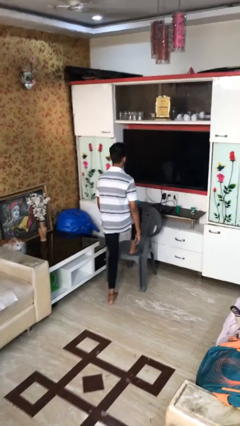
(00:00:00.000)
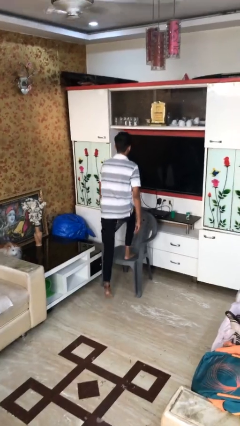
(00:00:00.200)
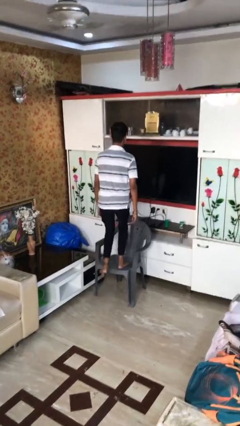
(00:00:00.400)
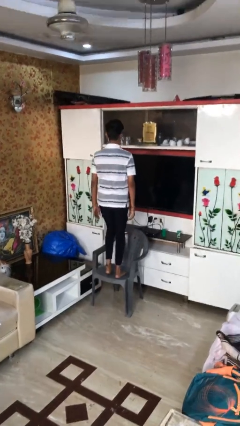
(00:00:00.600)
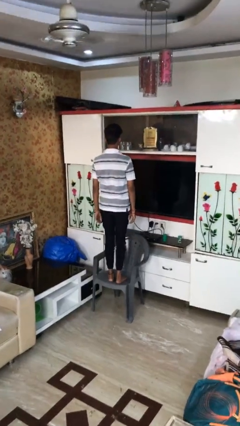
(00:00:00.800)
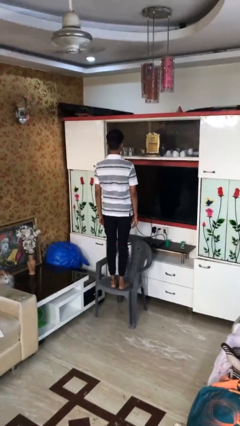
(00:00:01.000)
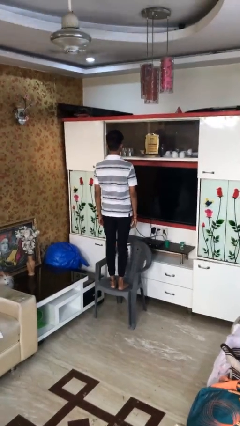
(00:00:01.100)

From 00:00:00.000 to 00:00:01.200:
person climbs on chair

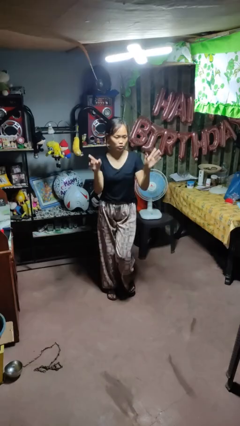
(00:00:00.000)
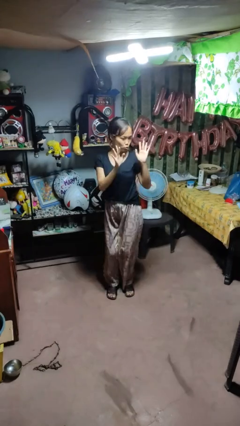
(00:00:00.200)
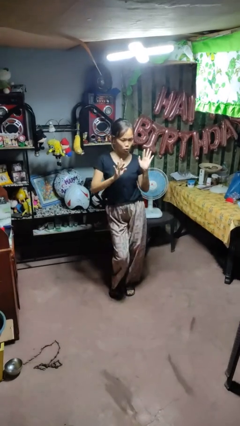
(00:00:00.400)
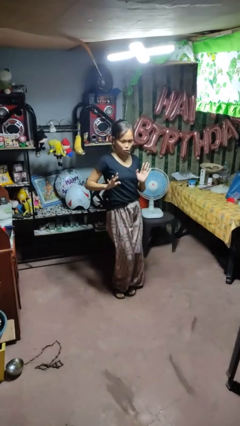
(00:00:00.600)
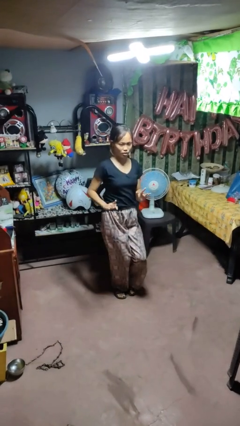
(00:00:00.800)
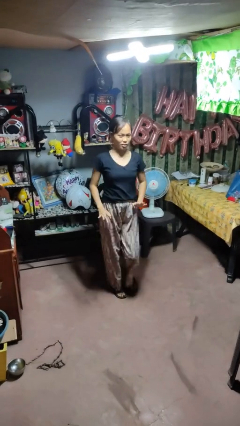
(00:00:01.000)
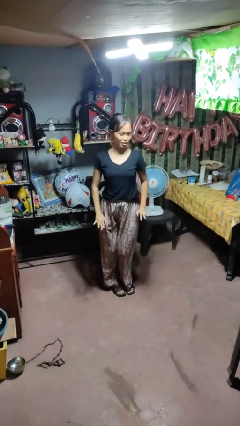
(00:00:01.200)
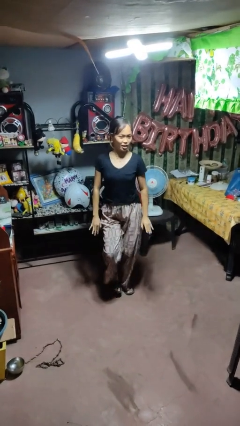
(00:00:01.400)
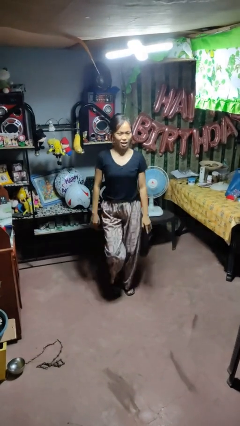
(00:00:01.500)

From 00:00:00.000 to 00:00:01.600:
person dances in place

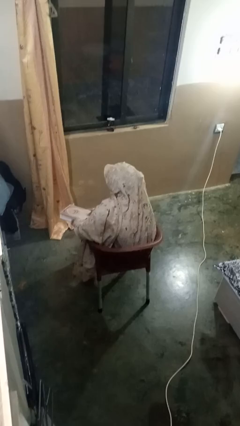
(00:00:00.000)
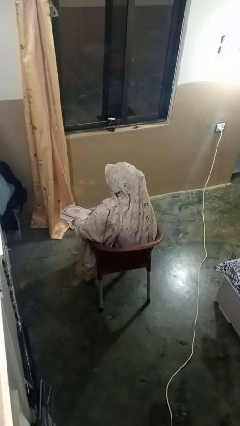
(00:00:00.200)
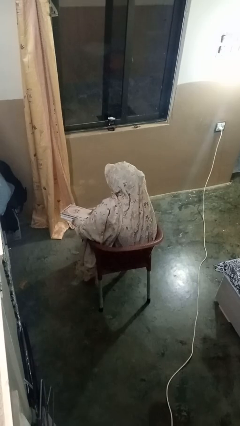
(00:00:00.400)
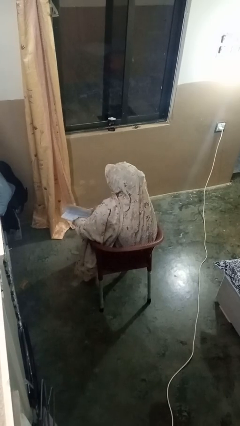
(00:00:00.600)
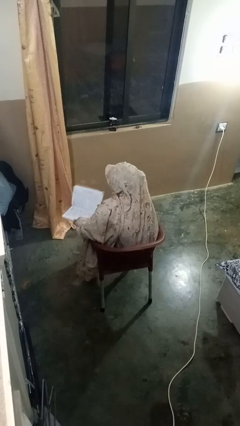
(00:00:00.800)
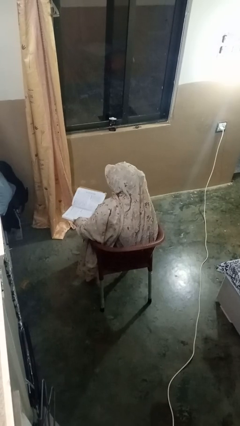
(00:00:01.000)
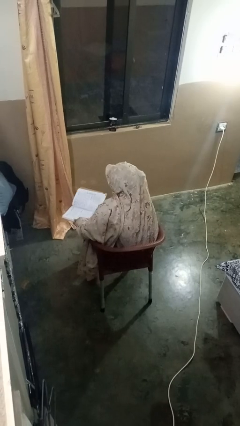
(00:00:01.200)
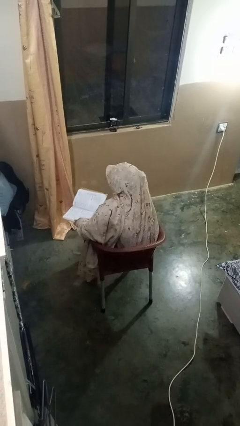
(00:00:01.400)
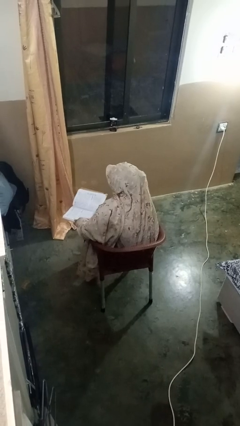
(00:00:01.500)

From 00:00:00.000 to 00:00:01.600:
person reads book

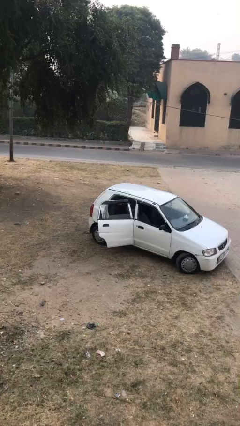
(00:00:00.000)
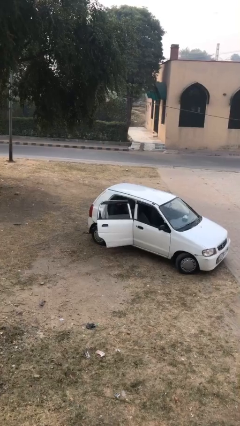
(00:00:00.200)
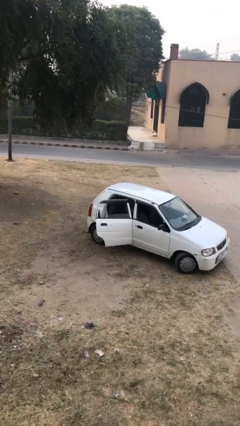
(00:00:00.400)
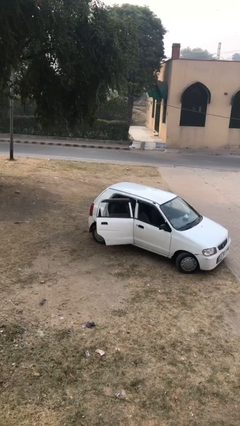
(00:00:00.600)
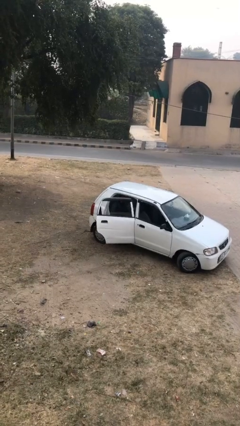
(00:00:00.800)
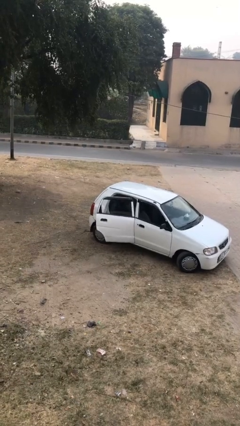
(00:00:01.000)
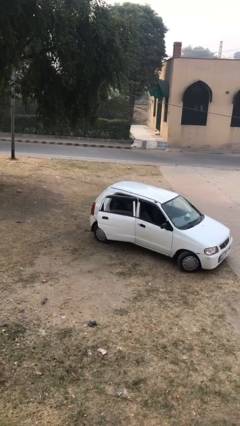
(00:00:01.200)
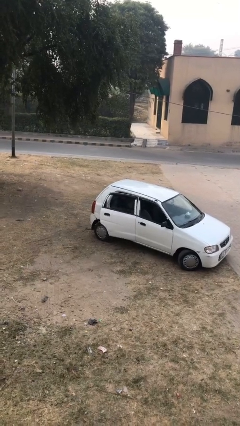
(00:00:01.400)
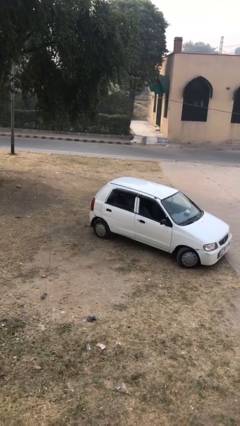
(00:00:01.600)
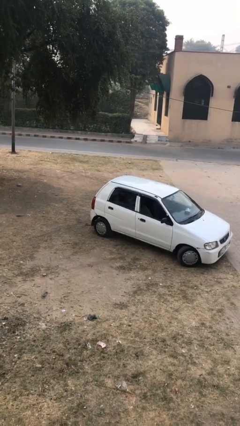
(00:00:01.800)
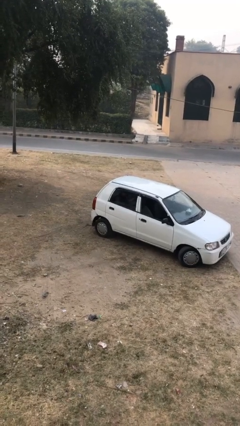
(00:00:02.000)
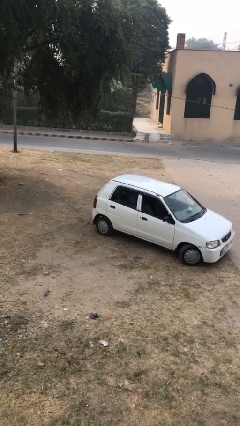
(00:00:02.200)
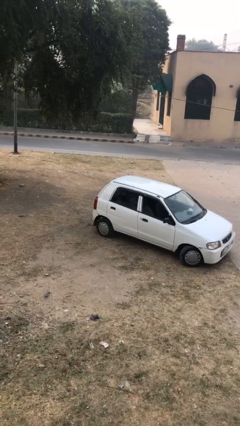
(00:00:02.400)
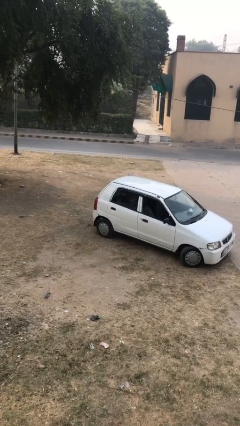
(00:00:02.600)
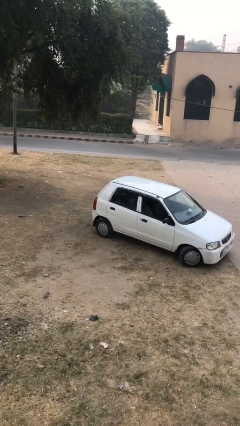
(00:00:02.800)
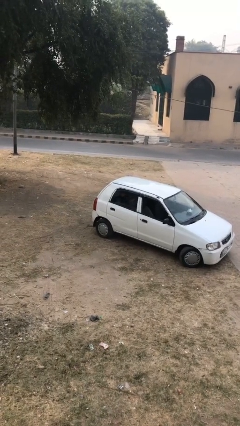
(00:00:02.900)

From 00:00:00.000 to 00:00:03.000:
person closes car door

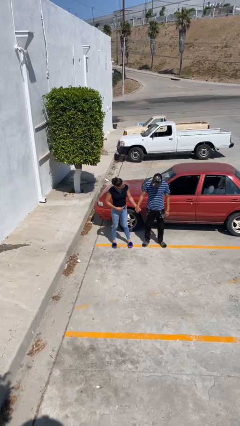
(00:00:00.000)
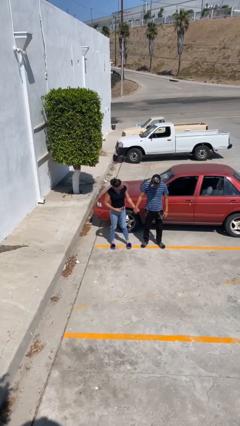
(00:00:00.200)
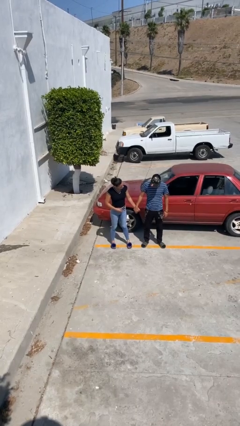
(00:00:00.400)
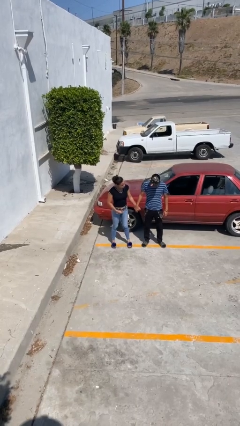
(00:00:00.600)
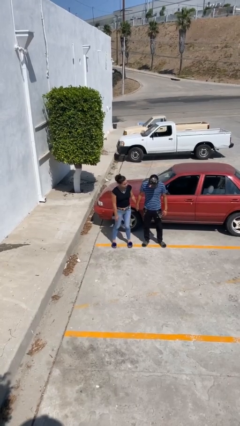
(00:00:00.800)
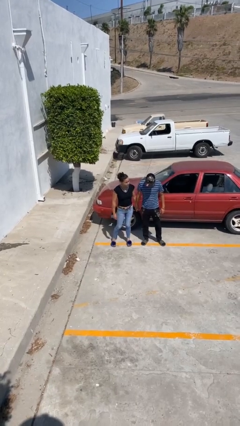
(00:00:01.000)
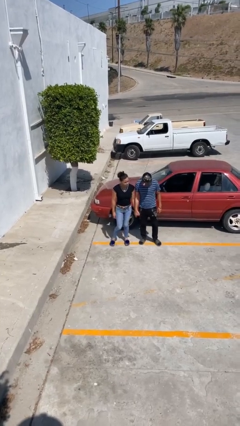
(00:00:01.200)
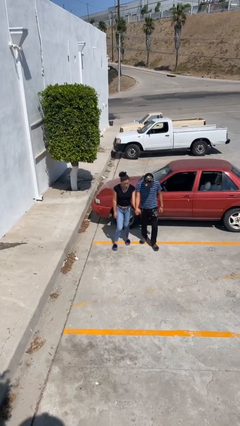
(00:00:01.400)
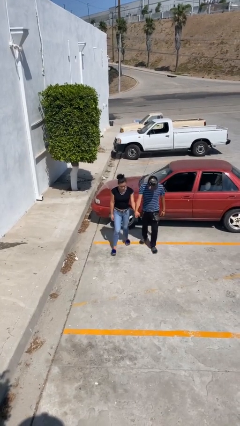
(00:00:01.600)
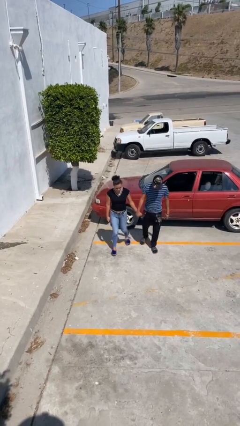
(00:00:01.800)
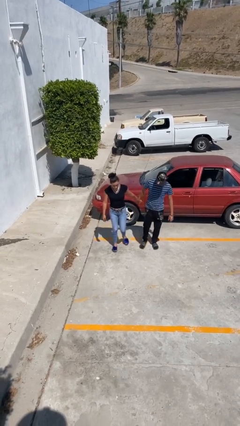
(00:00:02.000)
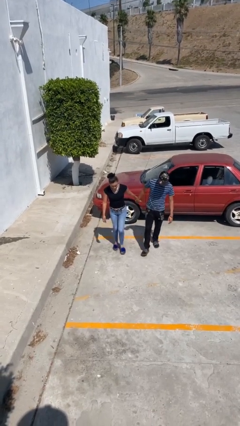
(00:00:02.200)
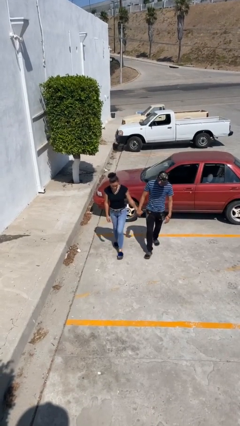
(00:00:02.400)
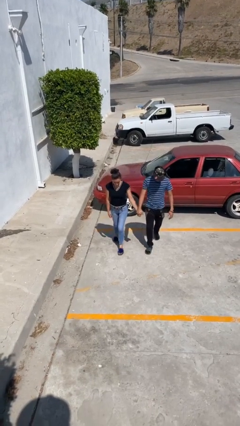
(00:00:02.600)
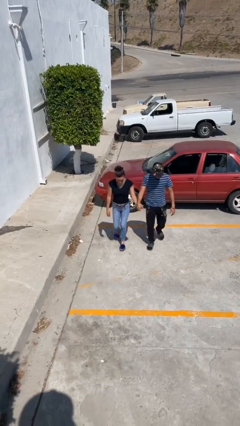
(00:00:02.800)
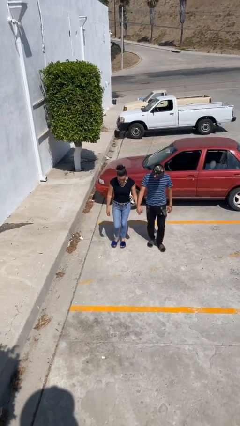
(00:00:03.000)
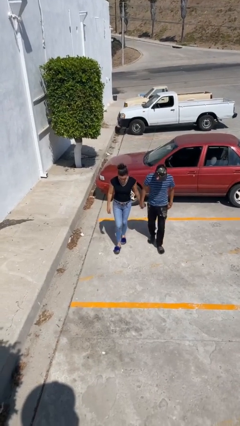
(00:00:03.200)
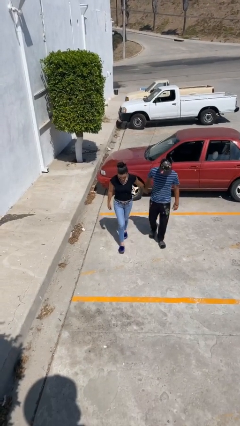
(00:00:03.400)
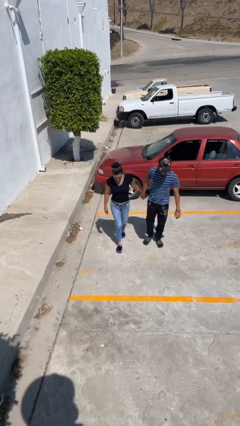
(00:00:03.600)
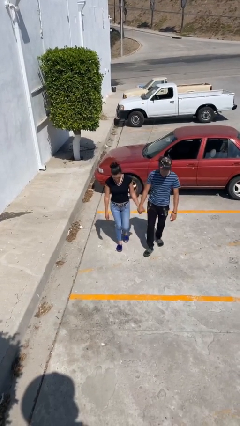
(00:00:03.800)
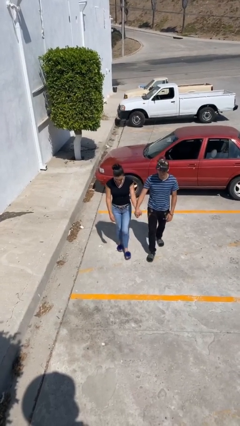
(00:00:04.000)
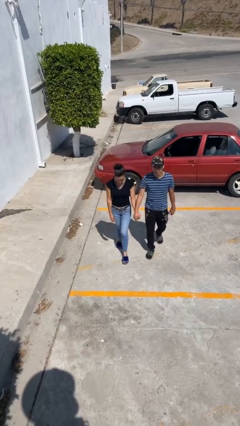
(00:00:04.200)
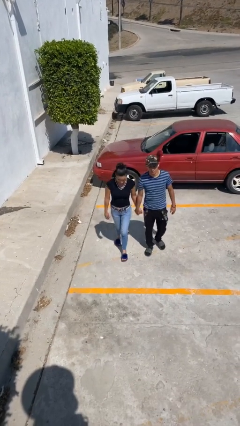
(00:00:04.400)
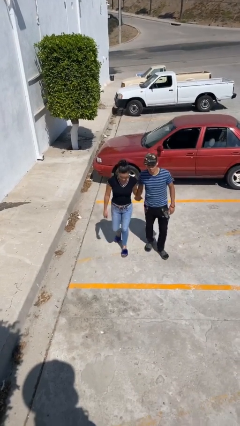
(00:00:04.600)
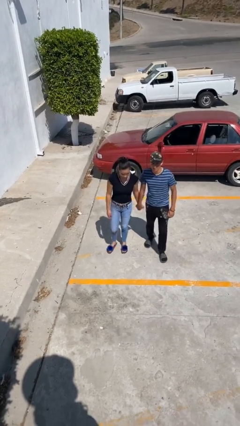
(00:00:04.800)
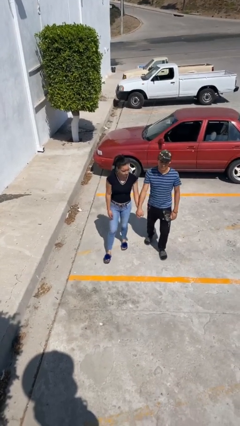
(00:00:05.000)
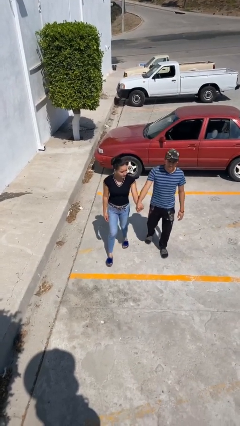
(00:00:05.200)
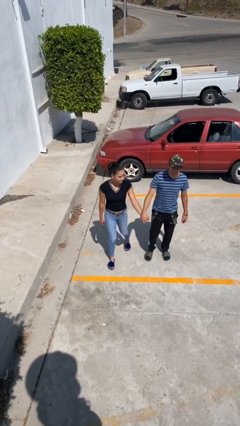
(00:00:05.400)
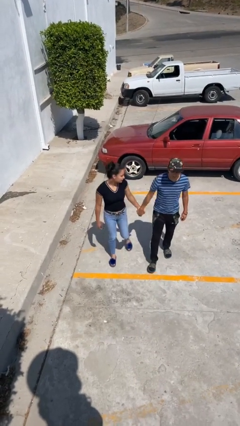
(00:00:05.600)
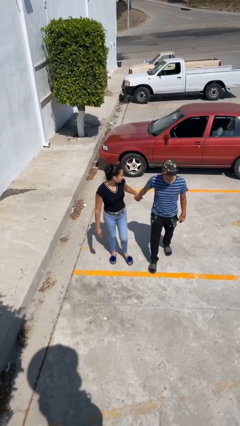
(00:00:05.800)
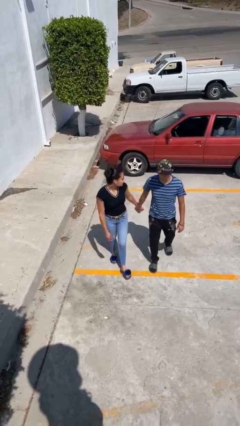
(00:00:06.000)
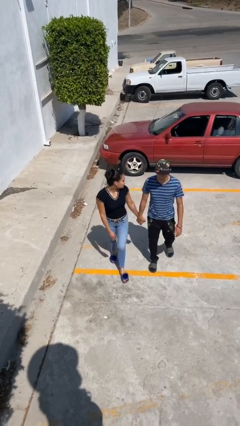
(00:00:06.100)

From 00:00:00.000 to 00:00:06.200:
person holds hand

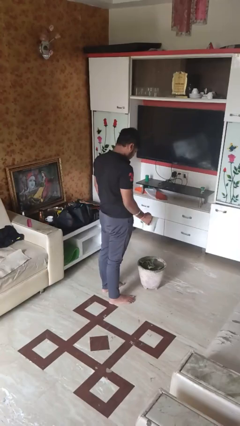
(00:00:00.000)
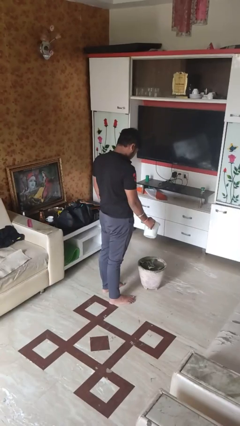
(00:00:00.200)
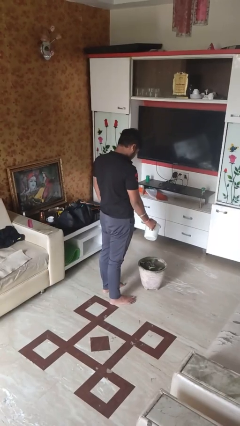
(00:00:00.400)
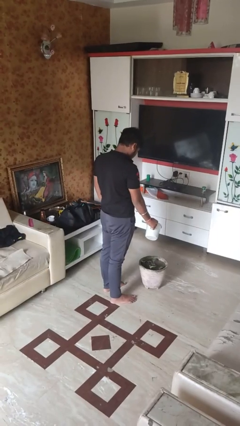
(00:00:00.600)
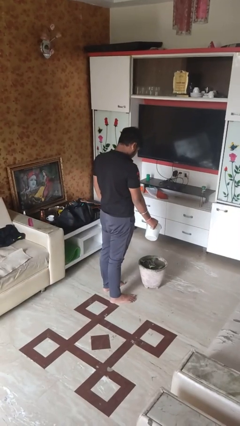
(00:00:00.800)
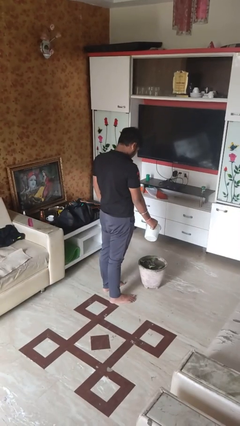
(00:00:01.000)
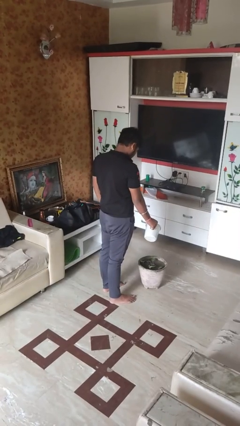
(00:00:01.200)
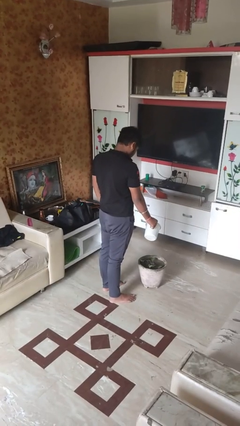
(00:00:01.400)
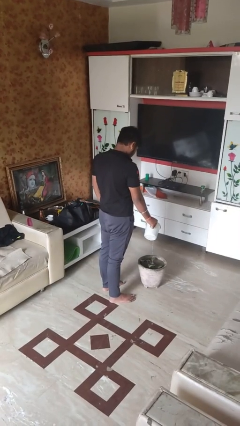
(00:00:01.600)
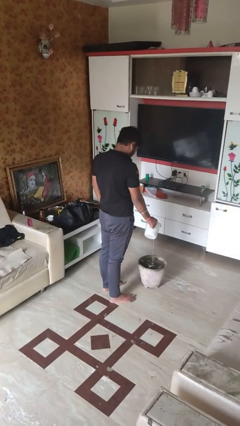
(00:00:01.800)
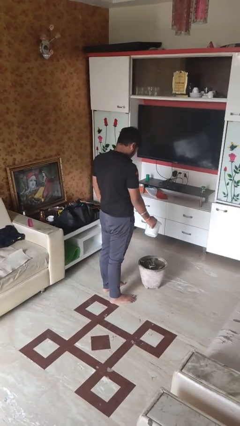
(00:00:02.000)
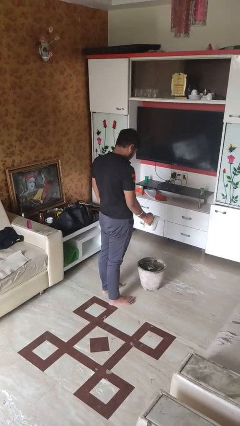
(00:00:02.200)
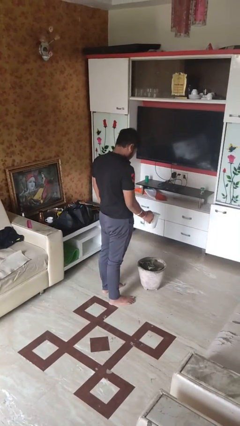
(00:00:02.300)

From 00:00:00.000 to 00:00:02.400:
person waters houseplant

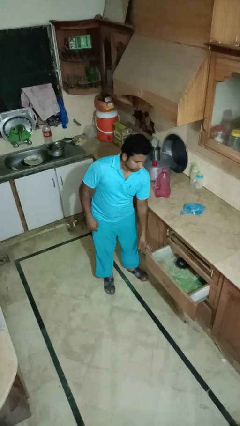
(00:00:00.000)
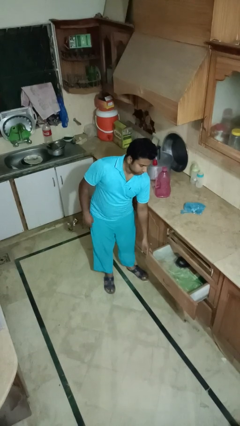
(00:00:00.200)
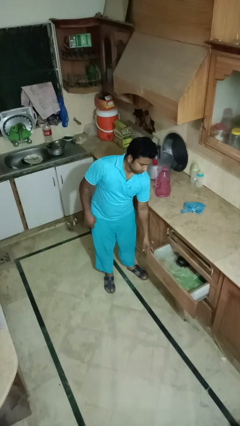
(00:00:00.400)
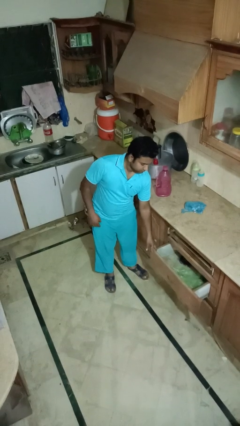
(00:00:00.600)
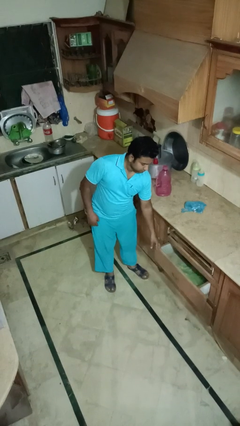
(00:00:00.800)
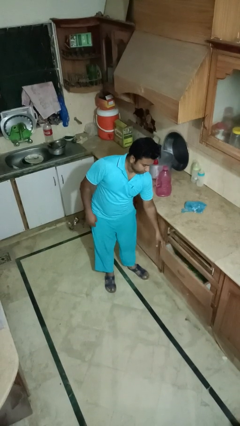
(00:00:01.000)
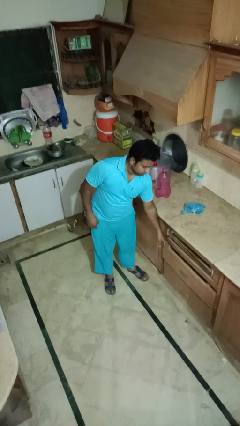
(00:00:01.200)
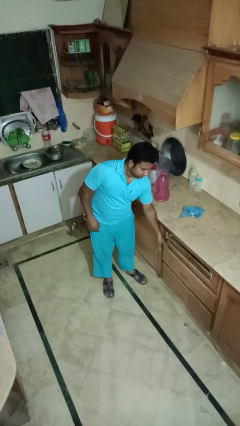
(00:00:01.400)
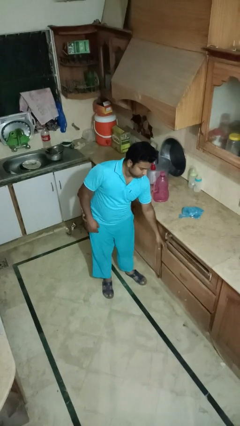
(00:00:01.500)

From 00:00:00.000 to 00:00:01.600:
person closes kitchen drawer
